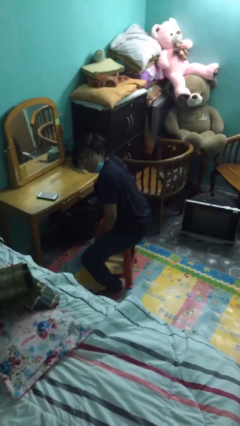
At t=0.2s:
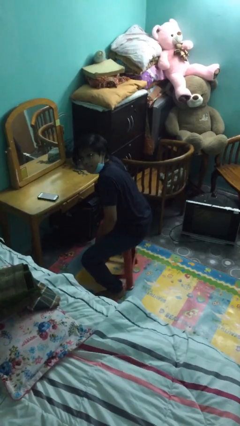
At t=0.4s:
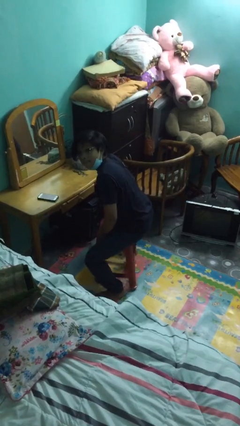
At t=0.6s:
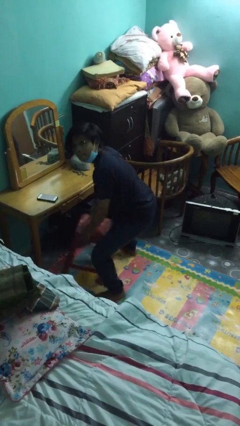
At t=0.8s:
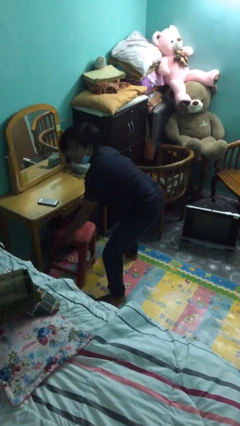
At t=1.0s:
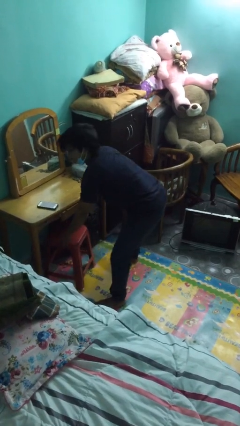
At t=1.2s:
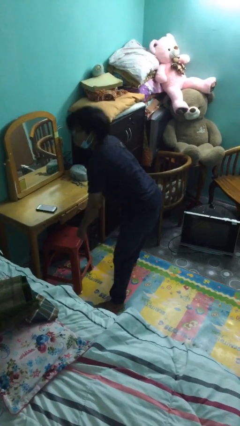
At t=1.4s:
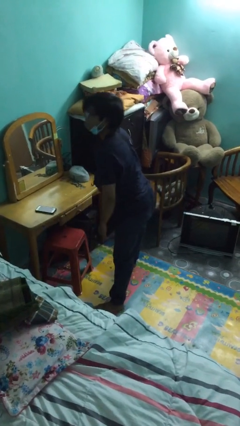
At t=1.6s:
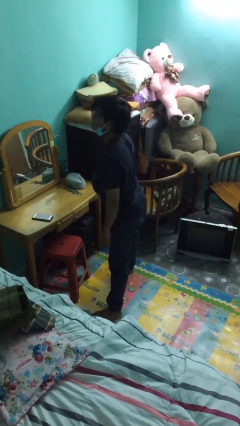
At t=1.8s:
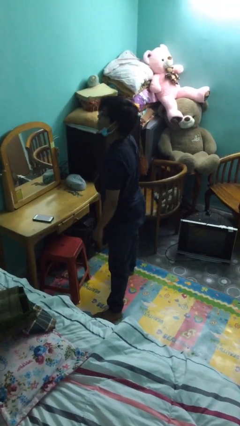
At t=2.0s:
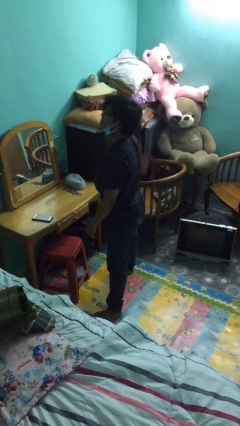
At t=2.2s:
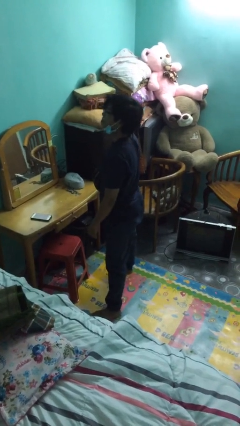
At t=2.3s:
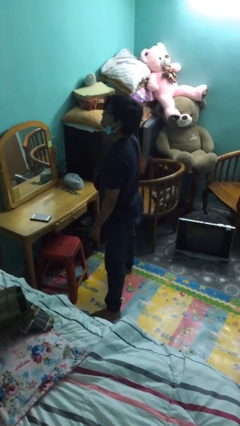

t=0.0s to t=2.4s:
person stands up

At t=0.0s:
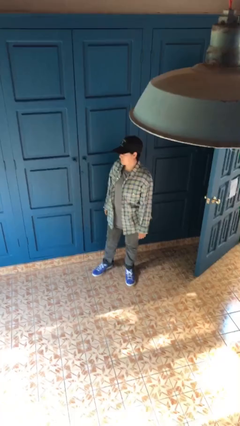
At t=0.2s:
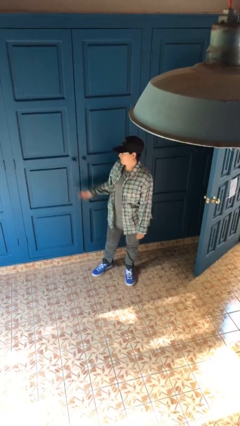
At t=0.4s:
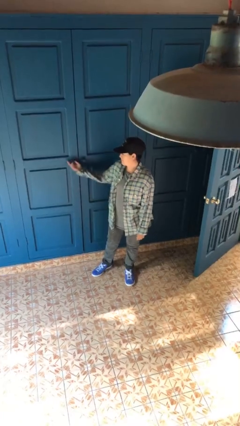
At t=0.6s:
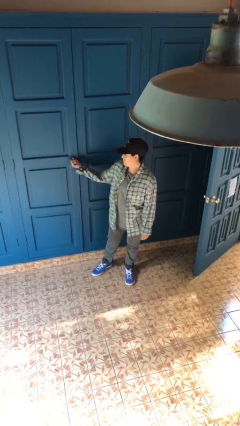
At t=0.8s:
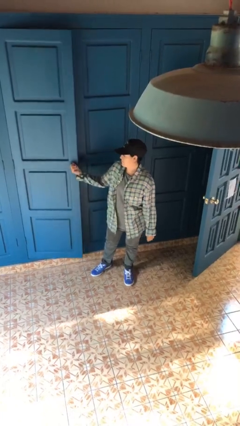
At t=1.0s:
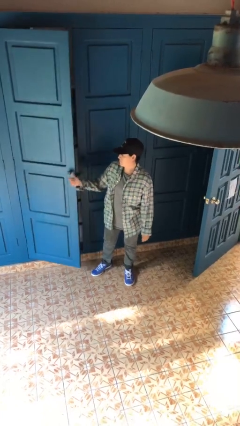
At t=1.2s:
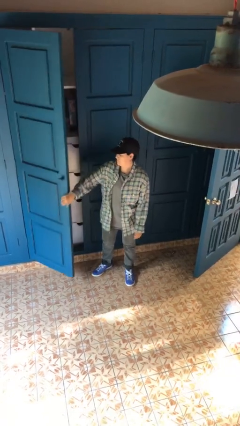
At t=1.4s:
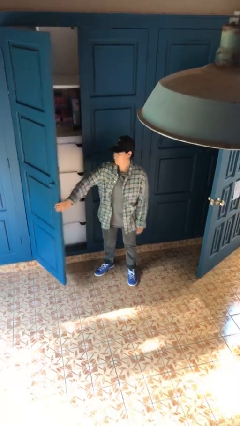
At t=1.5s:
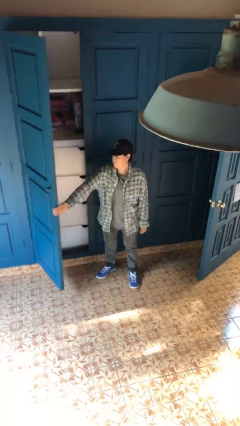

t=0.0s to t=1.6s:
person opens closet door

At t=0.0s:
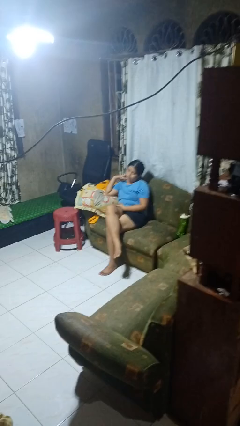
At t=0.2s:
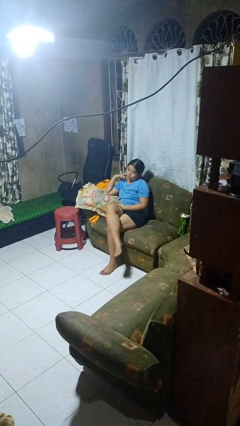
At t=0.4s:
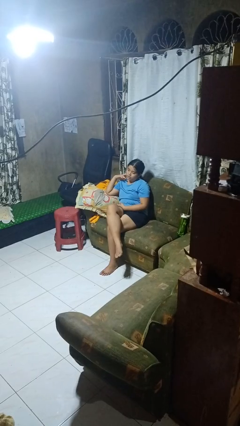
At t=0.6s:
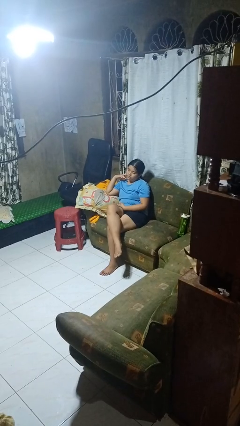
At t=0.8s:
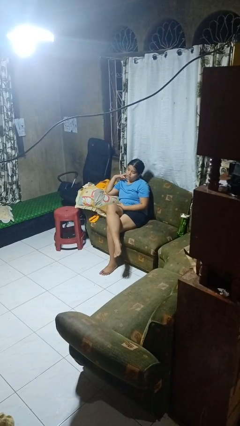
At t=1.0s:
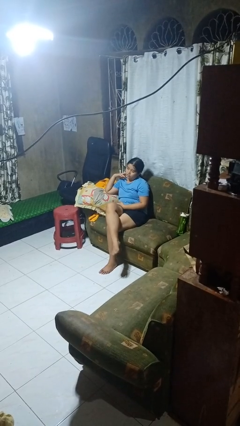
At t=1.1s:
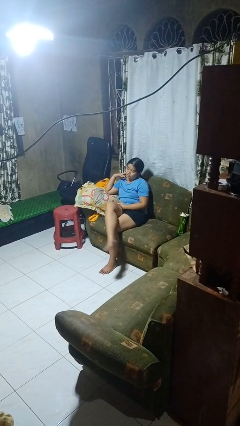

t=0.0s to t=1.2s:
person crosses legs

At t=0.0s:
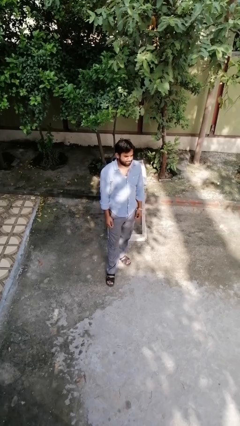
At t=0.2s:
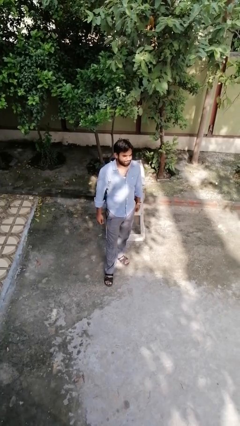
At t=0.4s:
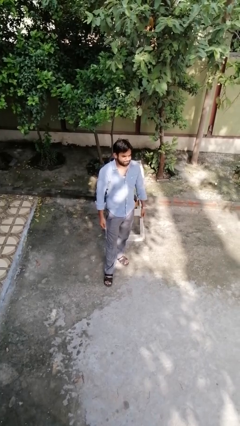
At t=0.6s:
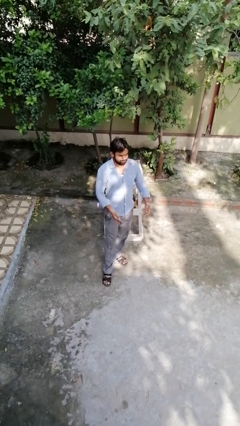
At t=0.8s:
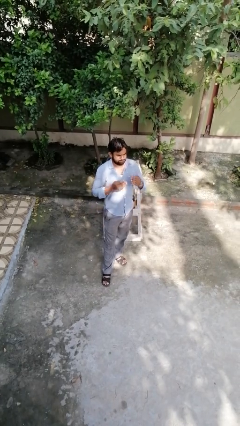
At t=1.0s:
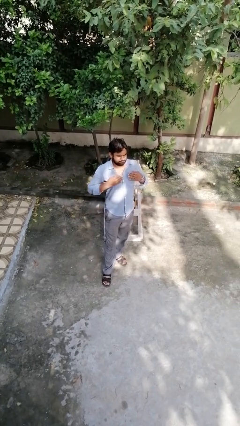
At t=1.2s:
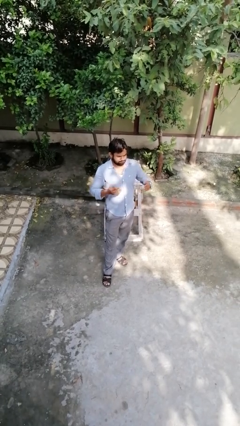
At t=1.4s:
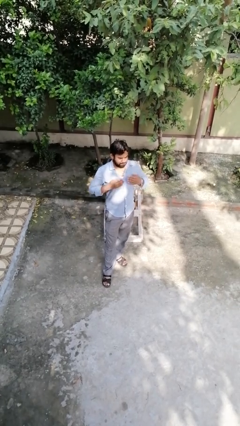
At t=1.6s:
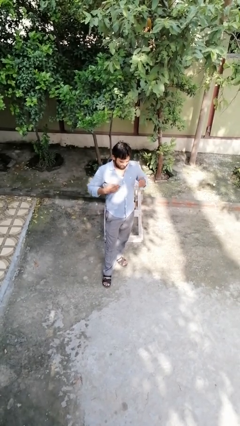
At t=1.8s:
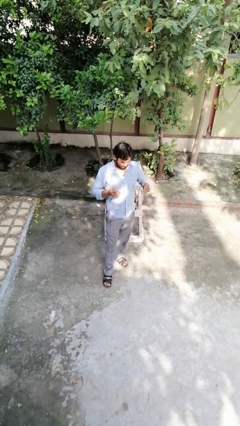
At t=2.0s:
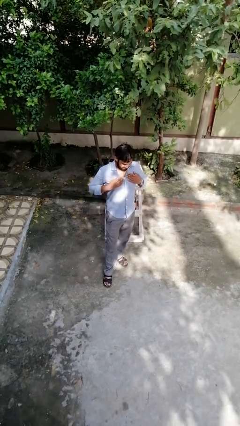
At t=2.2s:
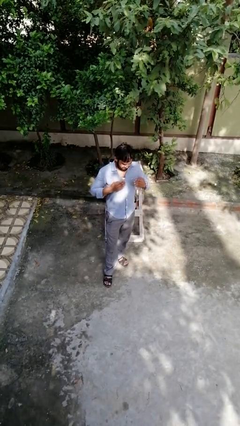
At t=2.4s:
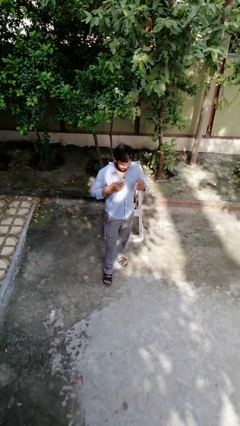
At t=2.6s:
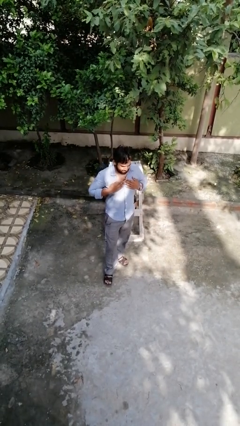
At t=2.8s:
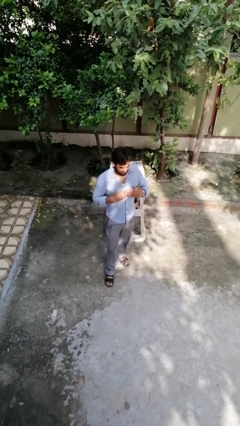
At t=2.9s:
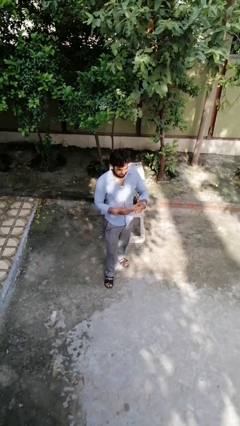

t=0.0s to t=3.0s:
person drums on chest

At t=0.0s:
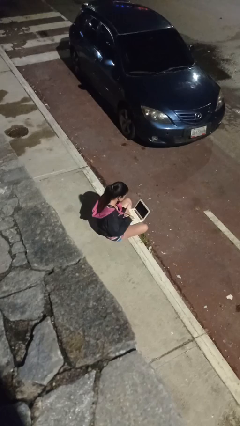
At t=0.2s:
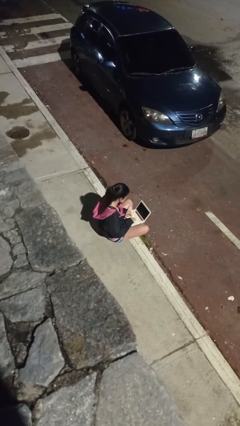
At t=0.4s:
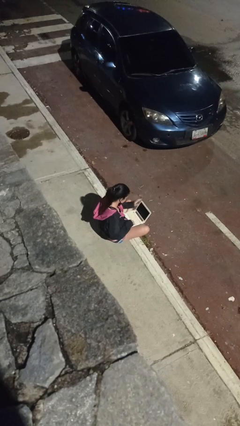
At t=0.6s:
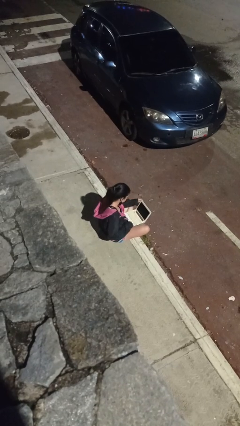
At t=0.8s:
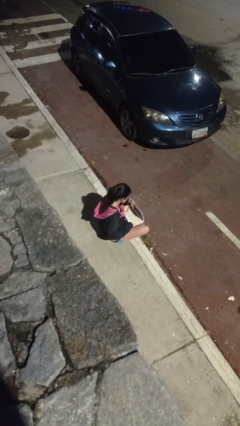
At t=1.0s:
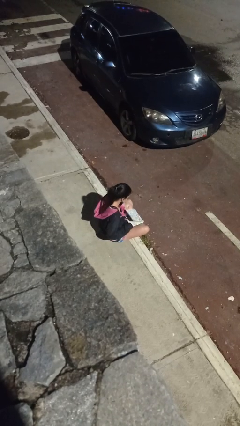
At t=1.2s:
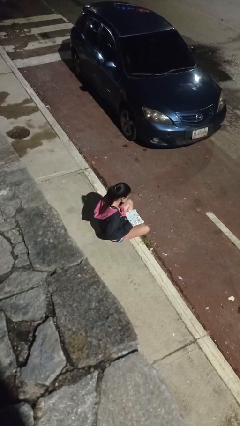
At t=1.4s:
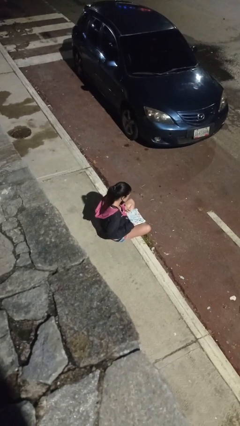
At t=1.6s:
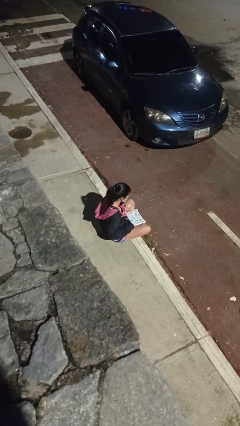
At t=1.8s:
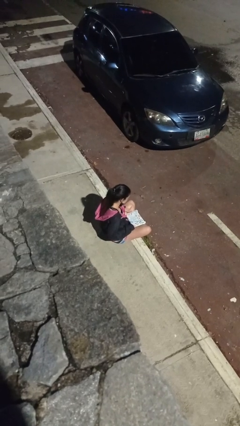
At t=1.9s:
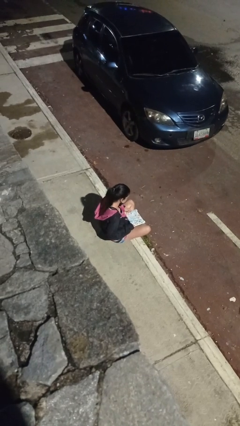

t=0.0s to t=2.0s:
person closes laptop

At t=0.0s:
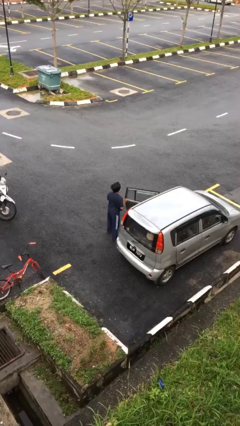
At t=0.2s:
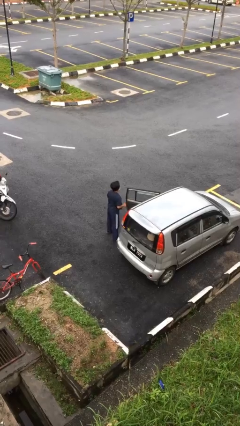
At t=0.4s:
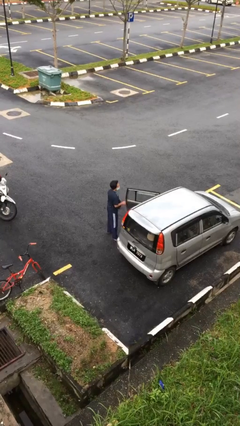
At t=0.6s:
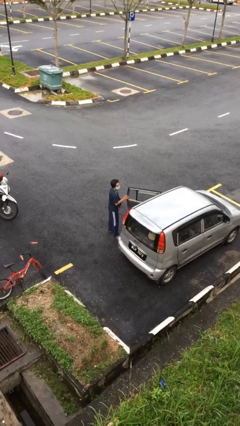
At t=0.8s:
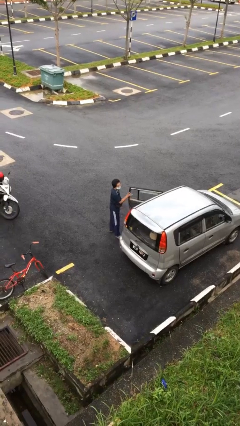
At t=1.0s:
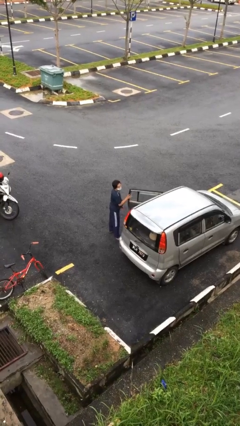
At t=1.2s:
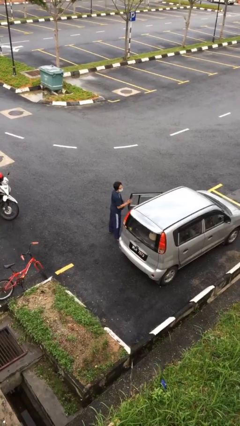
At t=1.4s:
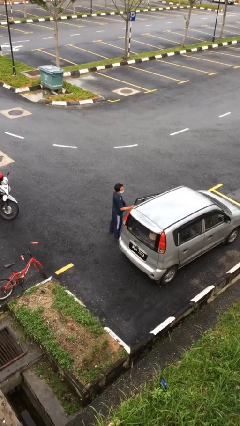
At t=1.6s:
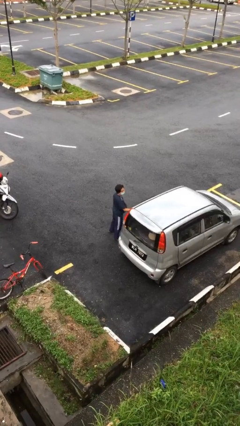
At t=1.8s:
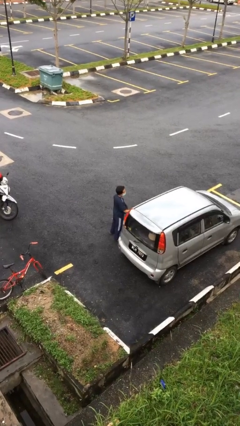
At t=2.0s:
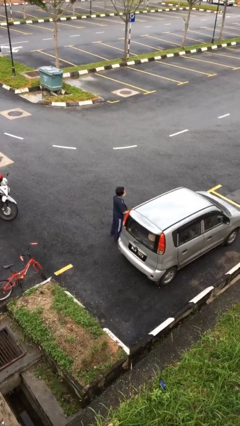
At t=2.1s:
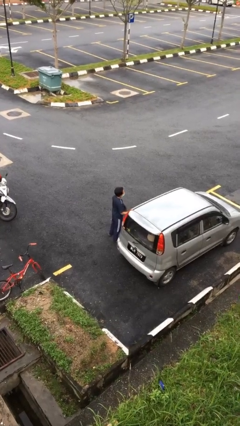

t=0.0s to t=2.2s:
person closes car door

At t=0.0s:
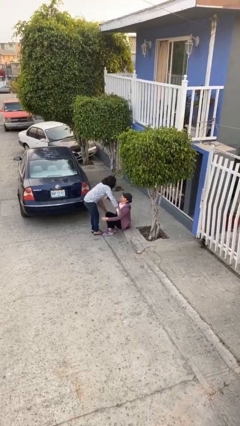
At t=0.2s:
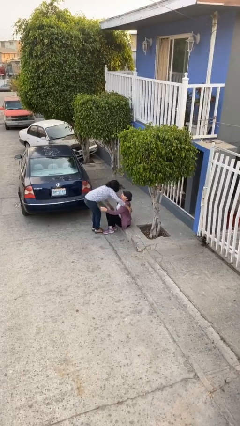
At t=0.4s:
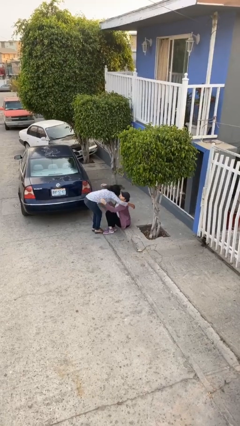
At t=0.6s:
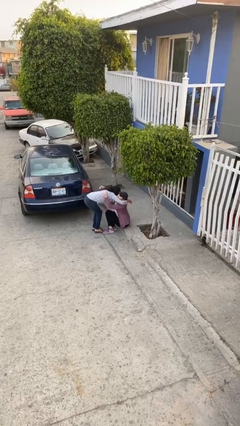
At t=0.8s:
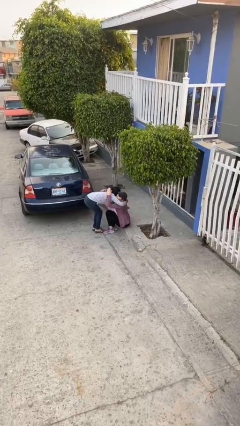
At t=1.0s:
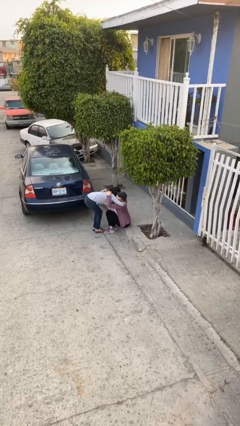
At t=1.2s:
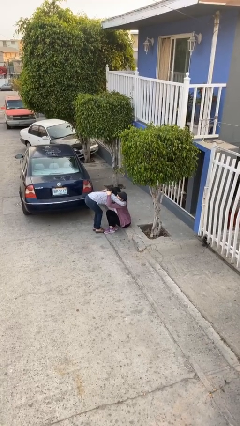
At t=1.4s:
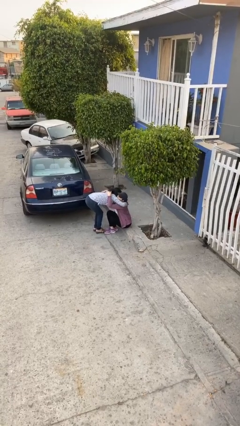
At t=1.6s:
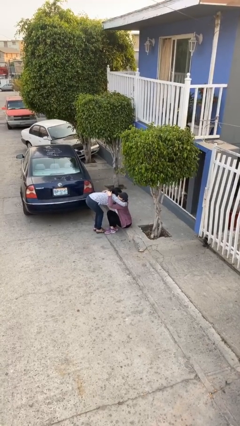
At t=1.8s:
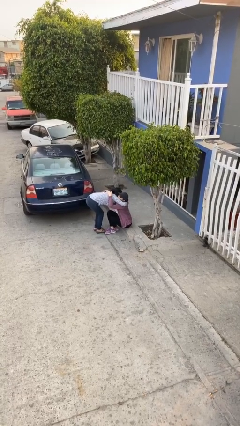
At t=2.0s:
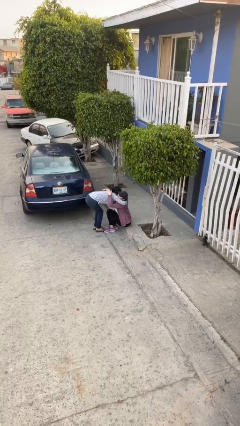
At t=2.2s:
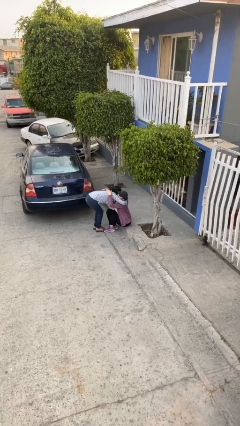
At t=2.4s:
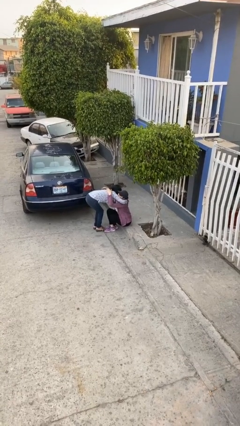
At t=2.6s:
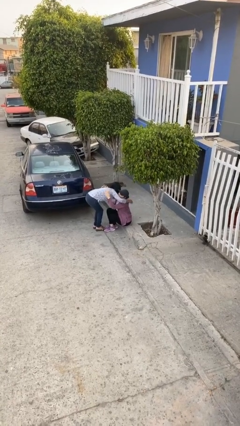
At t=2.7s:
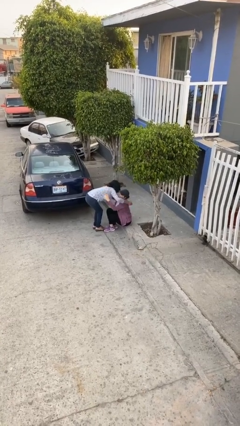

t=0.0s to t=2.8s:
person embraces person

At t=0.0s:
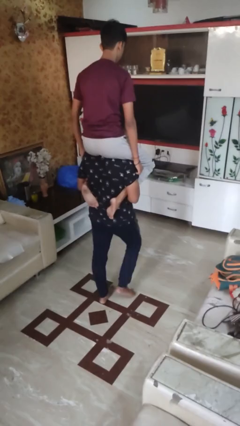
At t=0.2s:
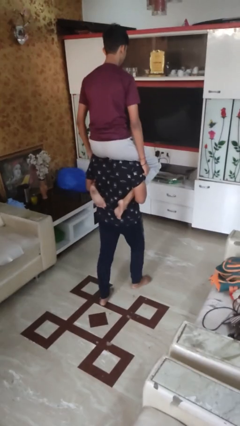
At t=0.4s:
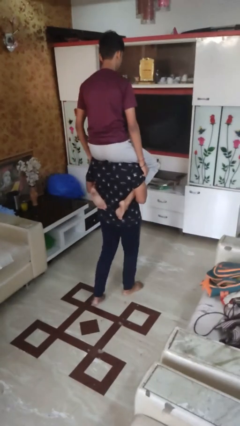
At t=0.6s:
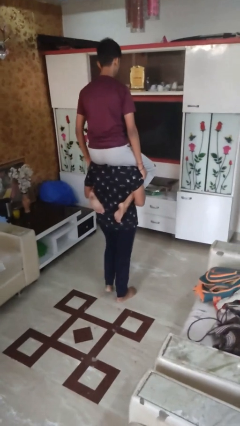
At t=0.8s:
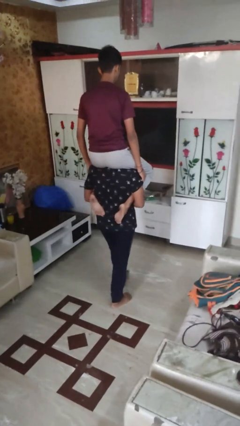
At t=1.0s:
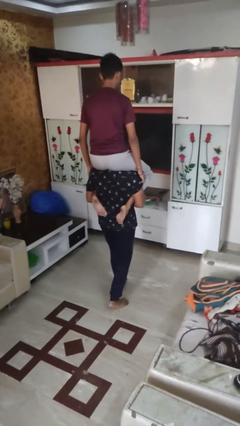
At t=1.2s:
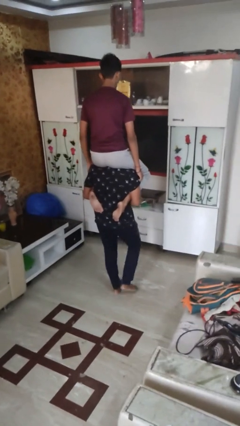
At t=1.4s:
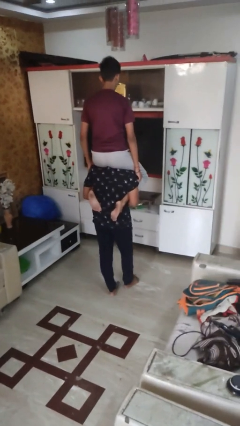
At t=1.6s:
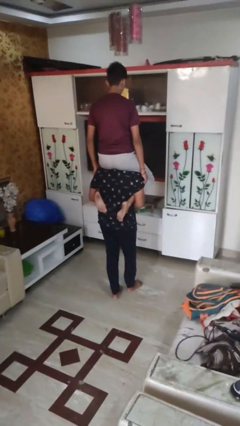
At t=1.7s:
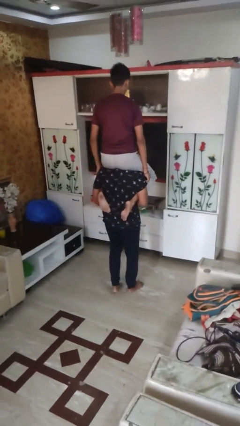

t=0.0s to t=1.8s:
person carries person on shoulders
